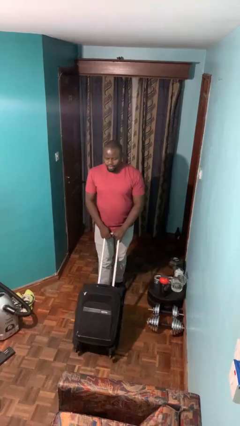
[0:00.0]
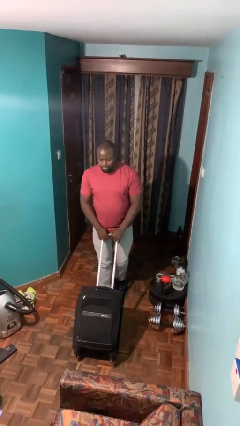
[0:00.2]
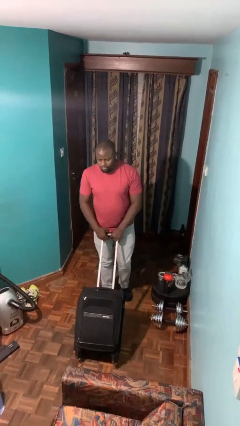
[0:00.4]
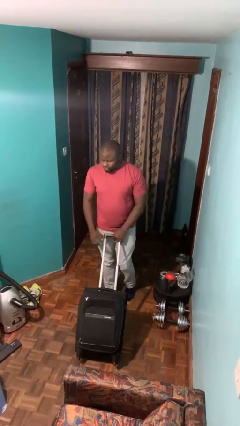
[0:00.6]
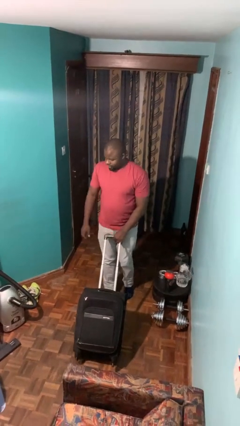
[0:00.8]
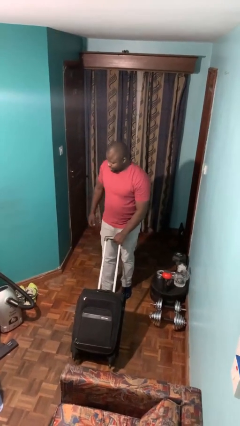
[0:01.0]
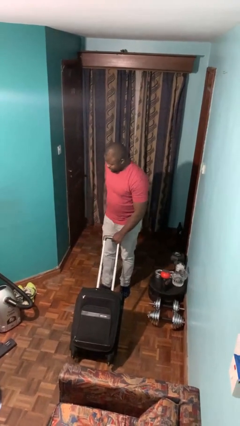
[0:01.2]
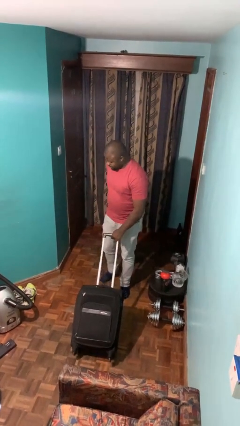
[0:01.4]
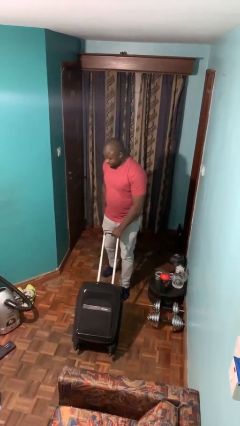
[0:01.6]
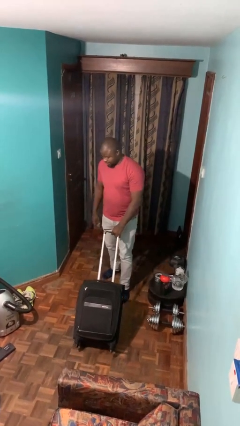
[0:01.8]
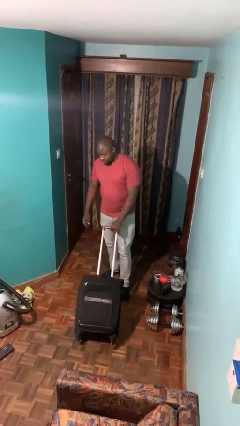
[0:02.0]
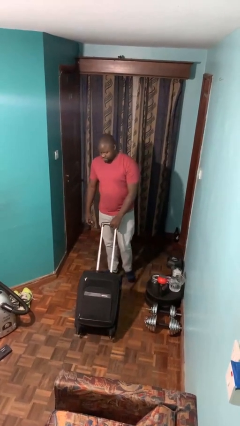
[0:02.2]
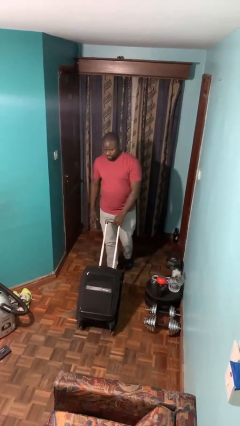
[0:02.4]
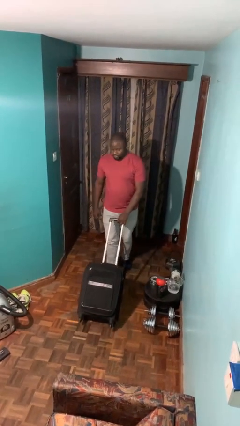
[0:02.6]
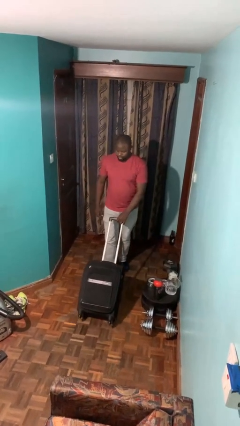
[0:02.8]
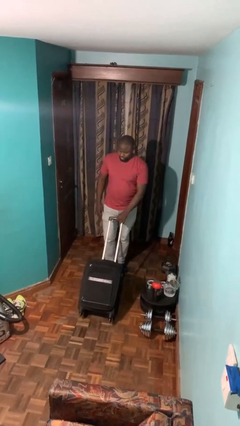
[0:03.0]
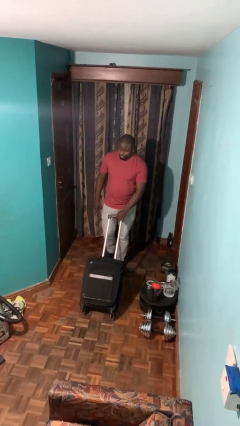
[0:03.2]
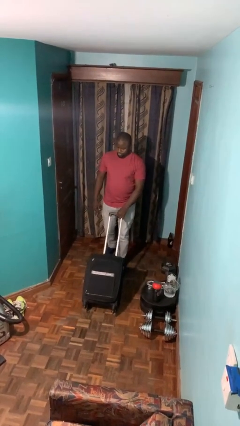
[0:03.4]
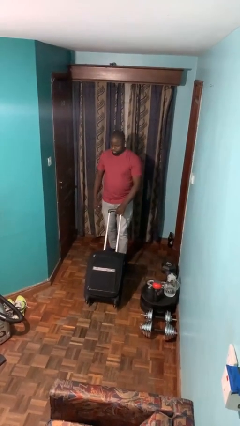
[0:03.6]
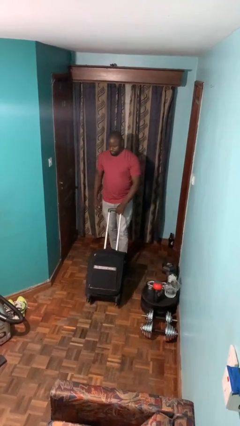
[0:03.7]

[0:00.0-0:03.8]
person pulls wheeled cart

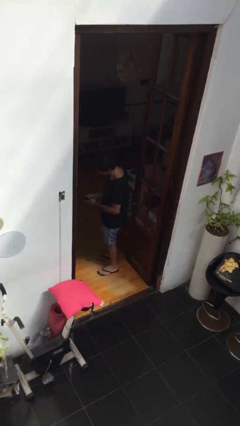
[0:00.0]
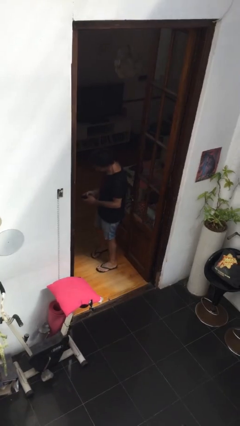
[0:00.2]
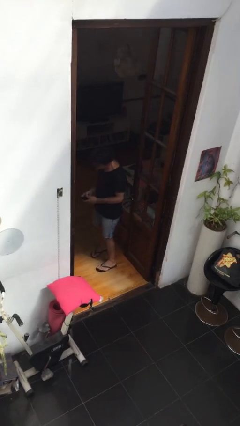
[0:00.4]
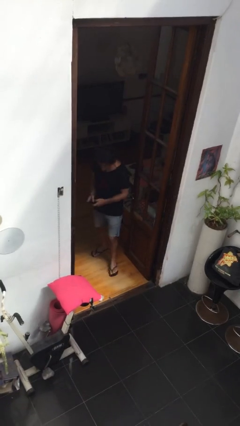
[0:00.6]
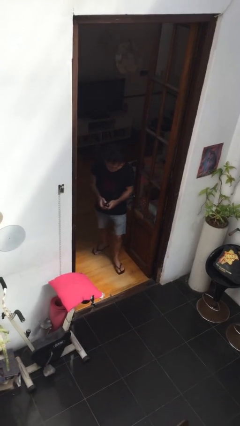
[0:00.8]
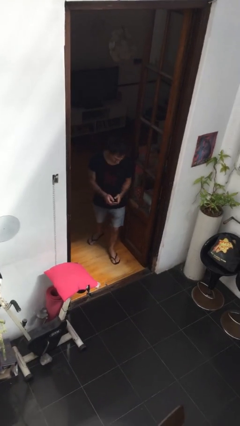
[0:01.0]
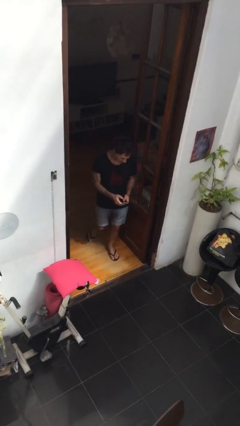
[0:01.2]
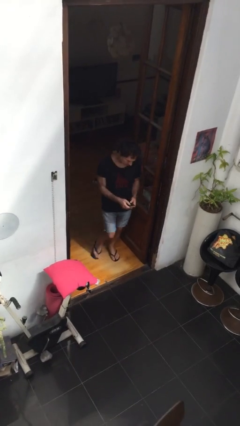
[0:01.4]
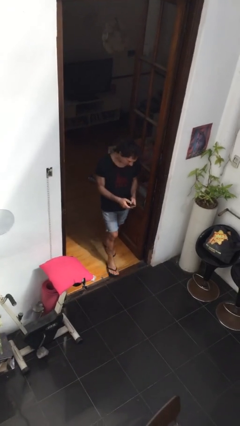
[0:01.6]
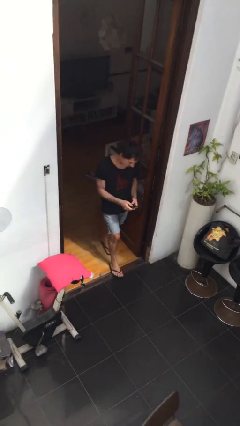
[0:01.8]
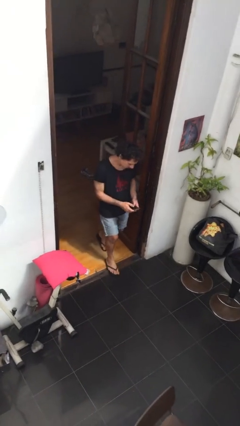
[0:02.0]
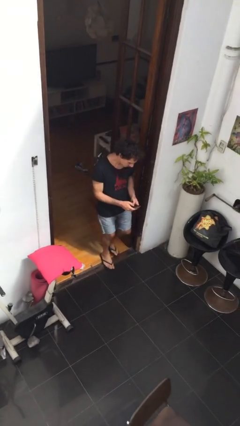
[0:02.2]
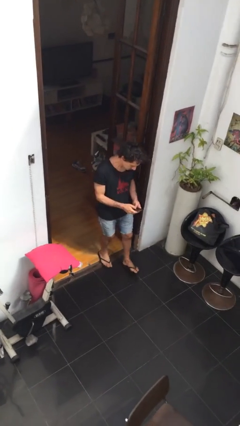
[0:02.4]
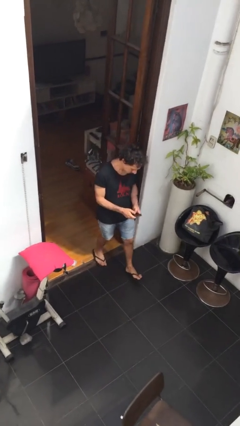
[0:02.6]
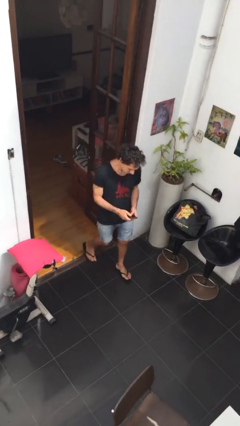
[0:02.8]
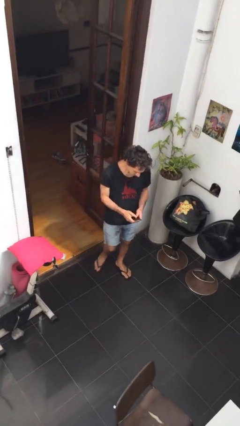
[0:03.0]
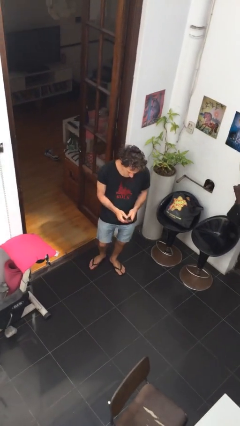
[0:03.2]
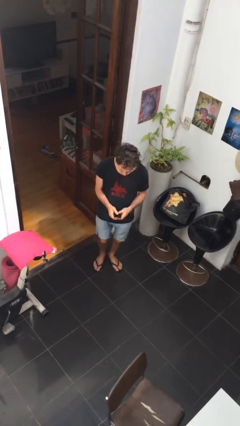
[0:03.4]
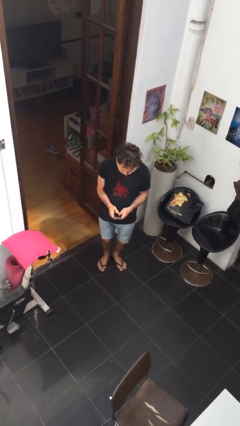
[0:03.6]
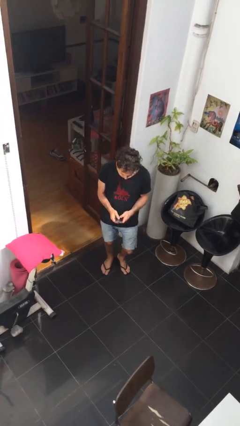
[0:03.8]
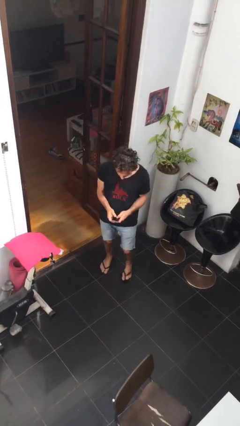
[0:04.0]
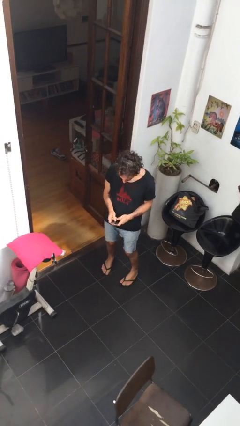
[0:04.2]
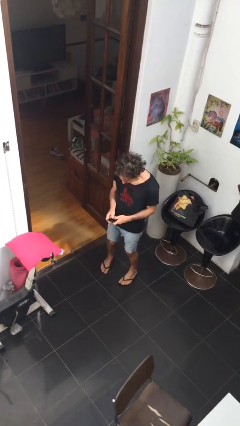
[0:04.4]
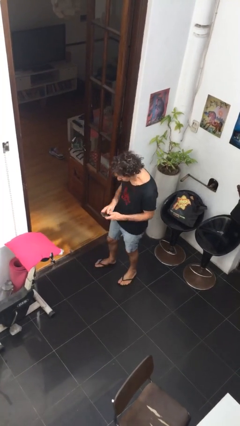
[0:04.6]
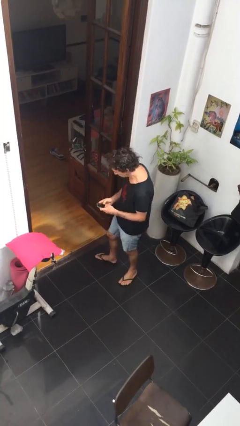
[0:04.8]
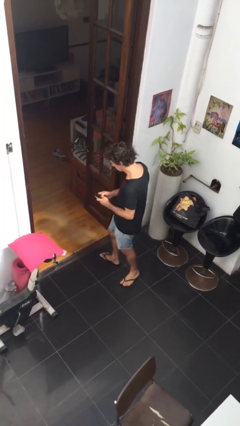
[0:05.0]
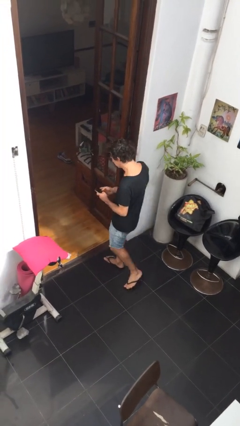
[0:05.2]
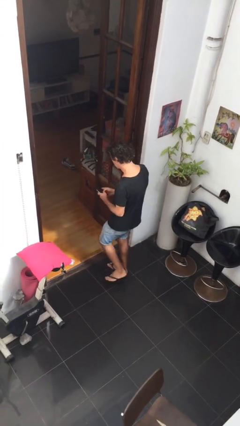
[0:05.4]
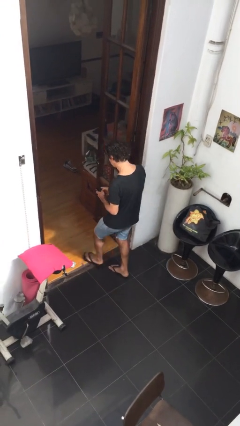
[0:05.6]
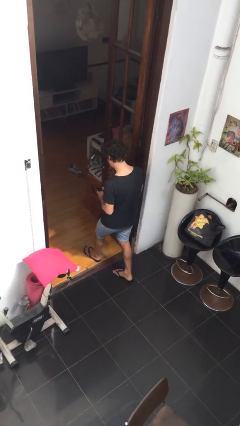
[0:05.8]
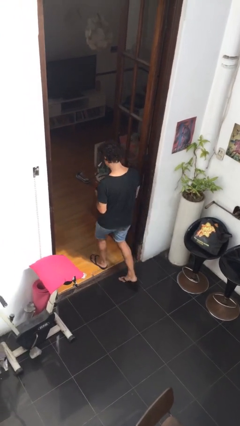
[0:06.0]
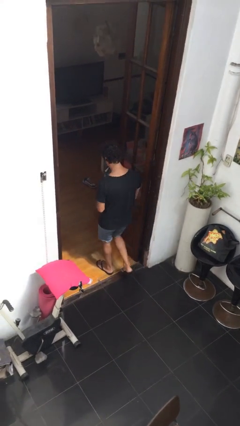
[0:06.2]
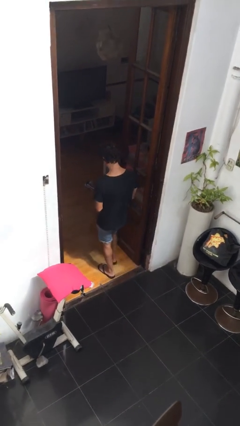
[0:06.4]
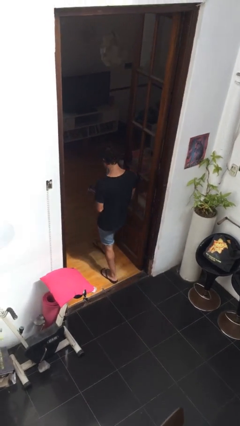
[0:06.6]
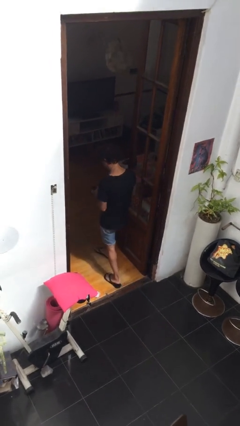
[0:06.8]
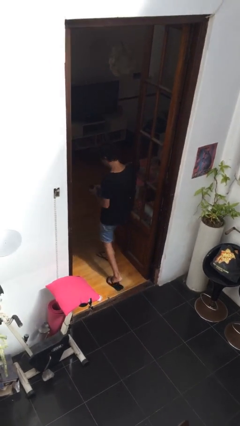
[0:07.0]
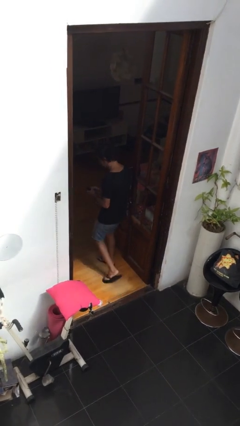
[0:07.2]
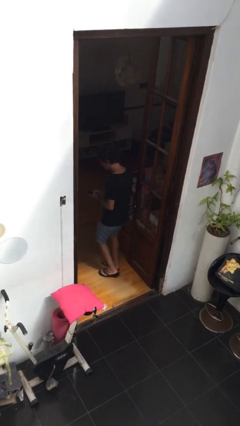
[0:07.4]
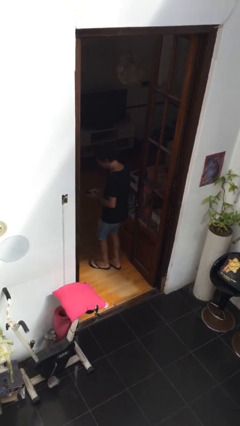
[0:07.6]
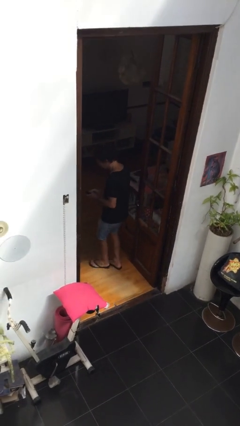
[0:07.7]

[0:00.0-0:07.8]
person enters scene through structure

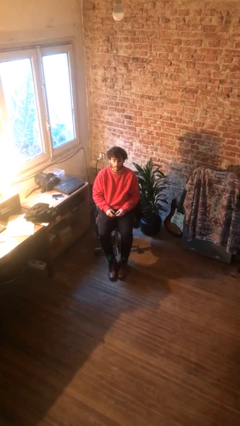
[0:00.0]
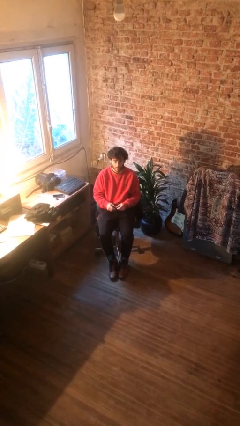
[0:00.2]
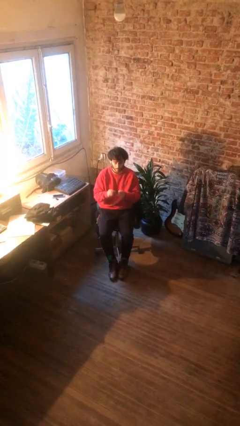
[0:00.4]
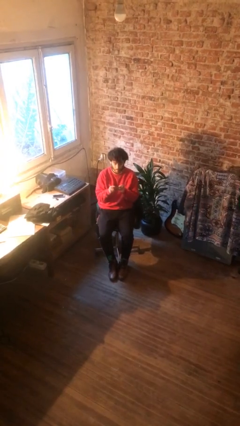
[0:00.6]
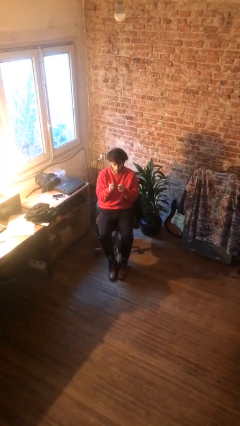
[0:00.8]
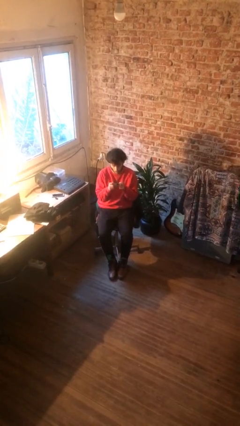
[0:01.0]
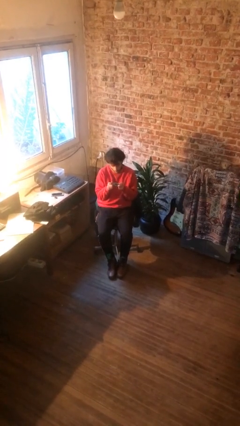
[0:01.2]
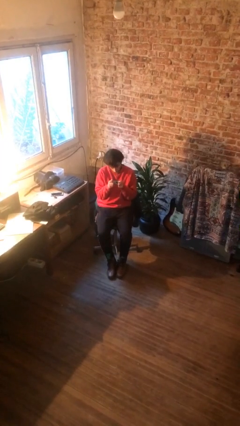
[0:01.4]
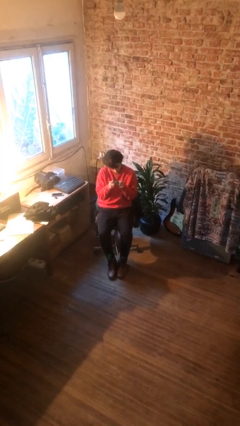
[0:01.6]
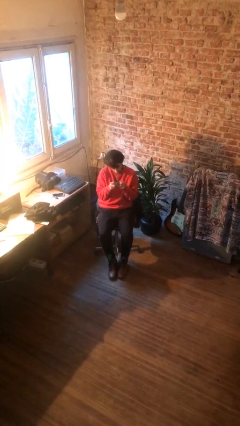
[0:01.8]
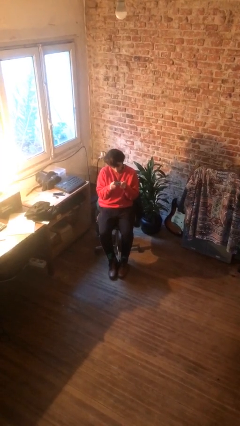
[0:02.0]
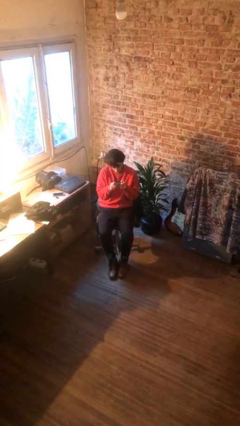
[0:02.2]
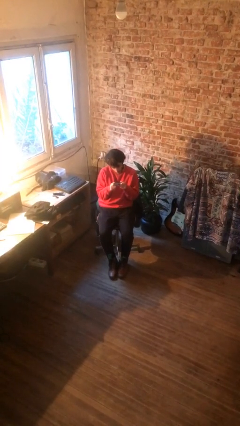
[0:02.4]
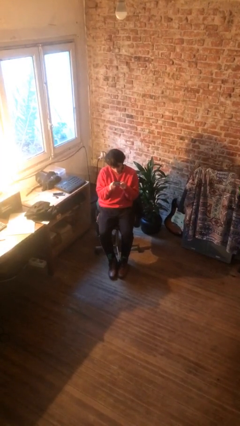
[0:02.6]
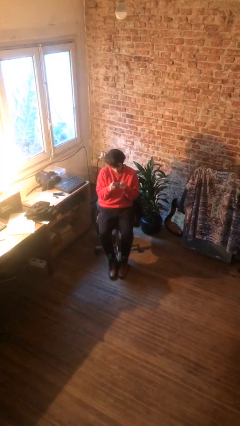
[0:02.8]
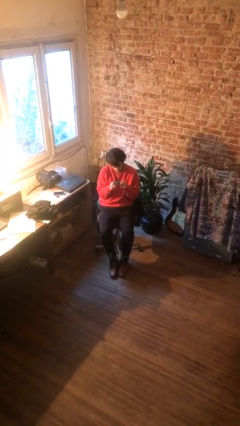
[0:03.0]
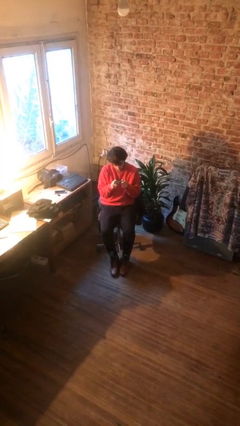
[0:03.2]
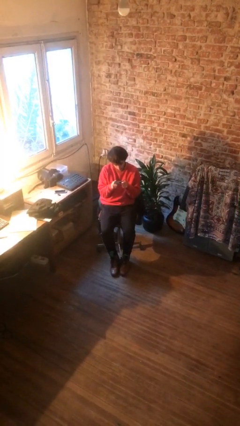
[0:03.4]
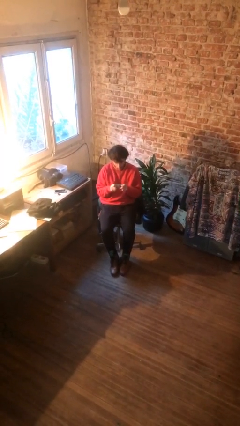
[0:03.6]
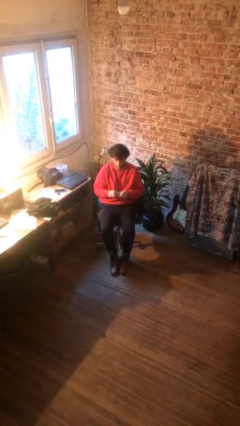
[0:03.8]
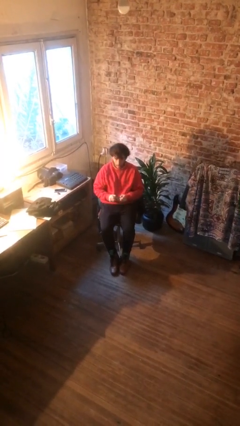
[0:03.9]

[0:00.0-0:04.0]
person interacts with handheld game

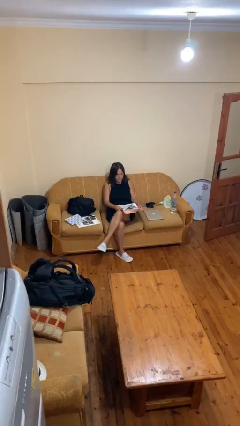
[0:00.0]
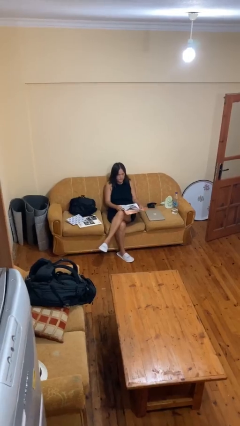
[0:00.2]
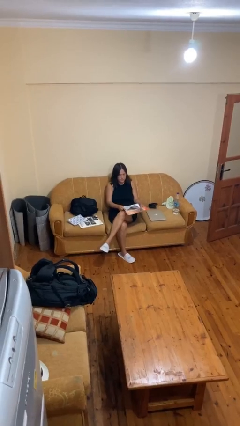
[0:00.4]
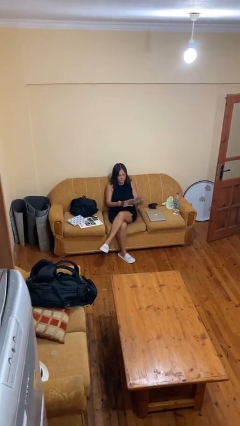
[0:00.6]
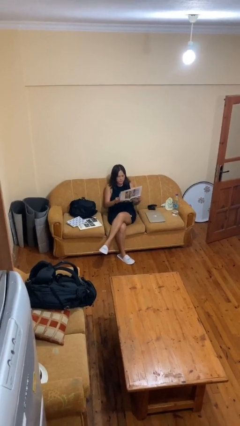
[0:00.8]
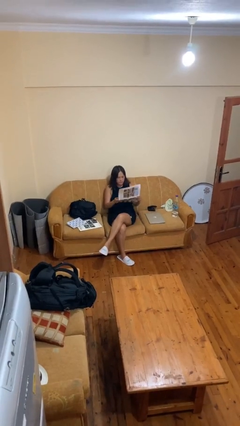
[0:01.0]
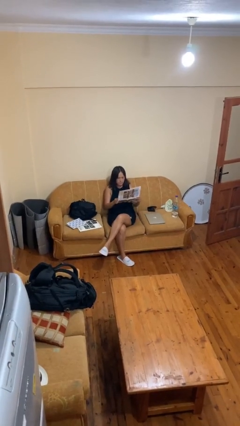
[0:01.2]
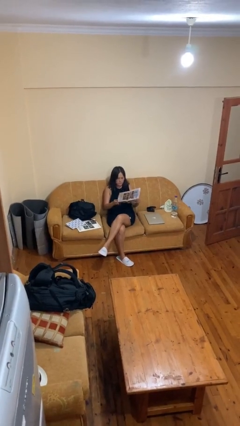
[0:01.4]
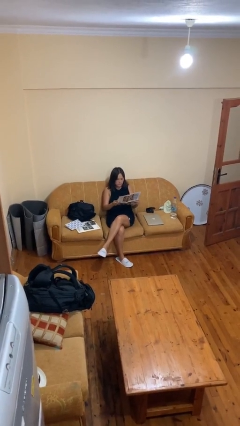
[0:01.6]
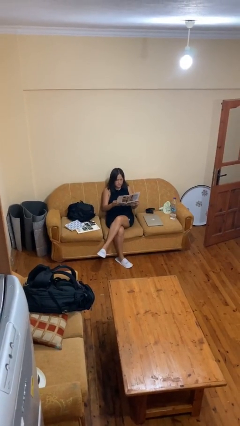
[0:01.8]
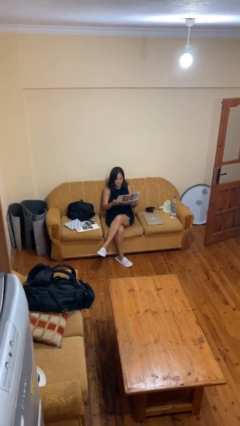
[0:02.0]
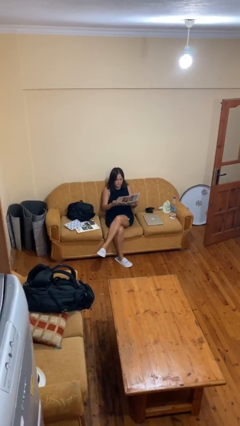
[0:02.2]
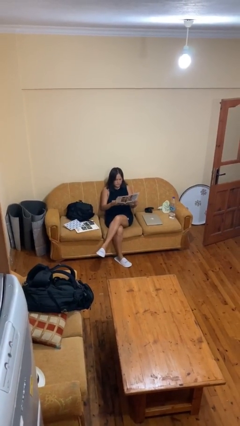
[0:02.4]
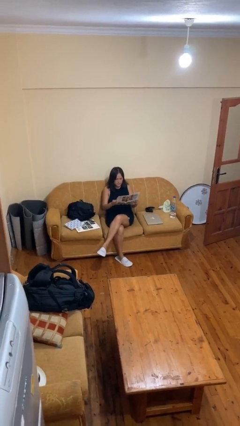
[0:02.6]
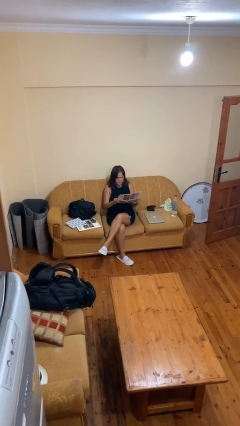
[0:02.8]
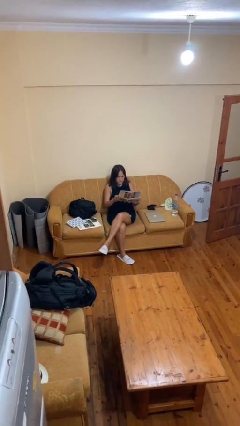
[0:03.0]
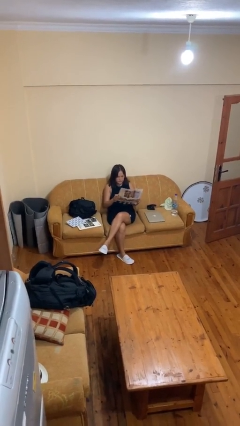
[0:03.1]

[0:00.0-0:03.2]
person reads newspaper
